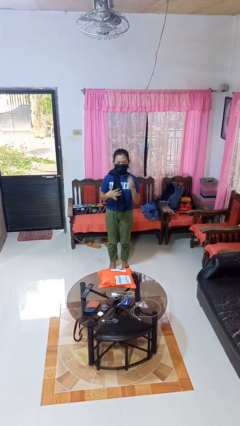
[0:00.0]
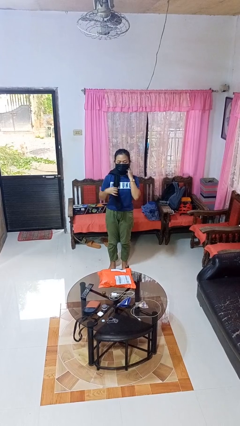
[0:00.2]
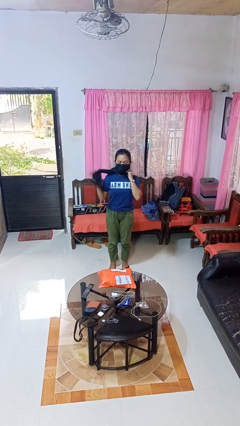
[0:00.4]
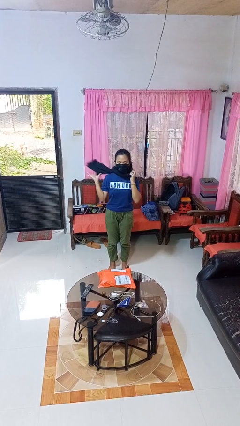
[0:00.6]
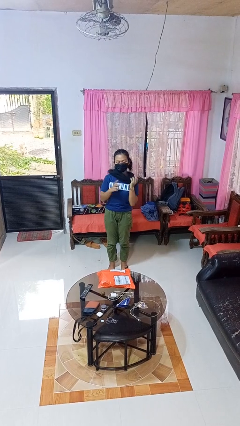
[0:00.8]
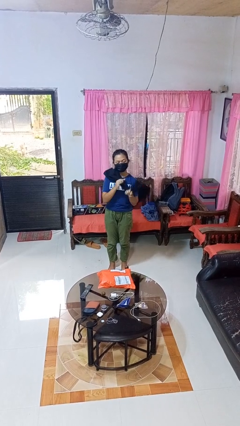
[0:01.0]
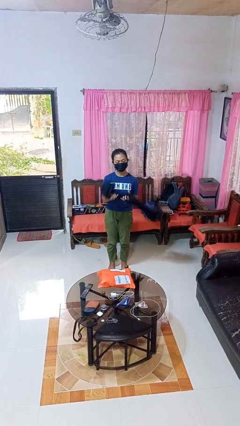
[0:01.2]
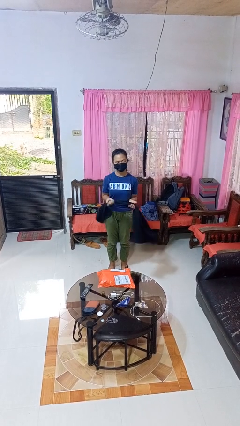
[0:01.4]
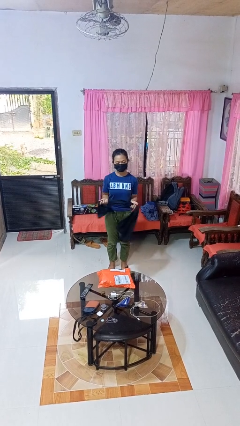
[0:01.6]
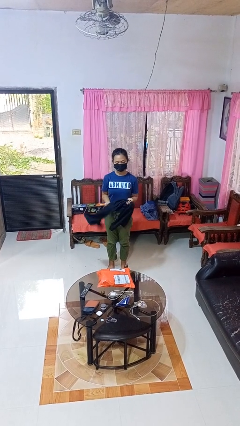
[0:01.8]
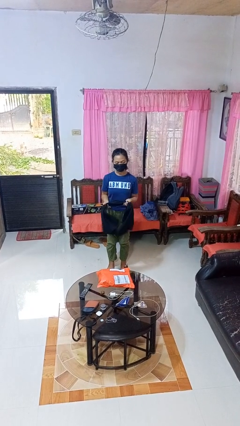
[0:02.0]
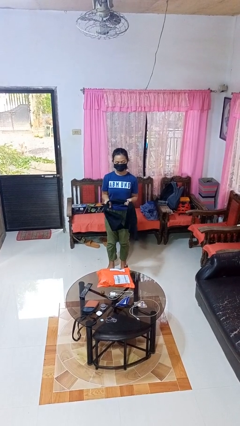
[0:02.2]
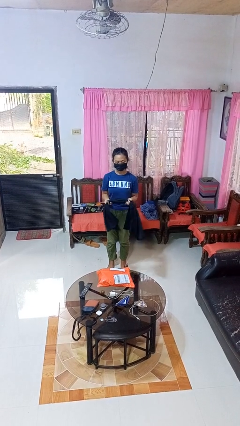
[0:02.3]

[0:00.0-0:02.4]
person takes off scarf

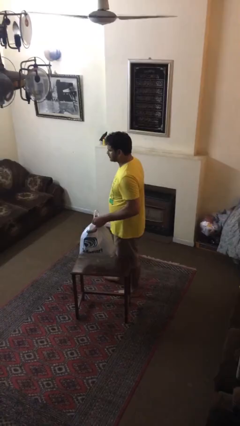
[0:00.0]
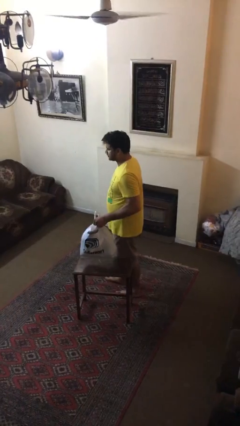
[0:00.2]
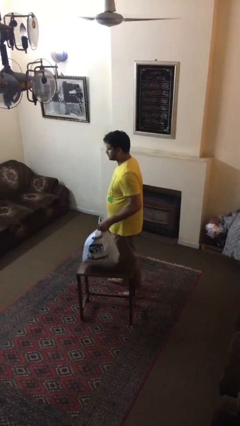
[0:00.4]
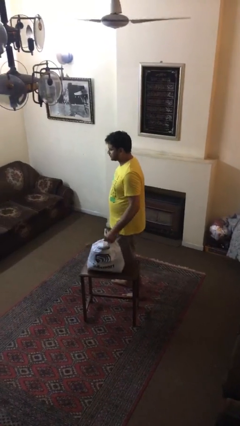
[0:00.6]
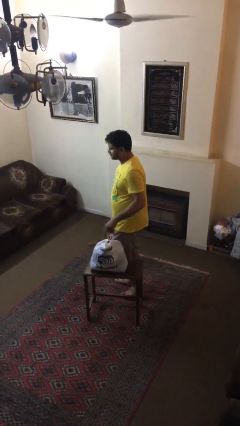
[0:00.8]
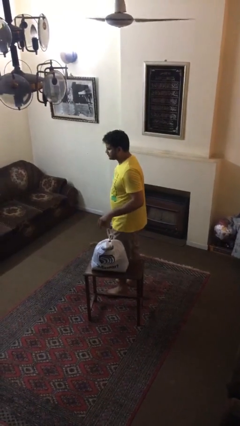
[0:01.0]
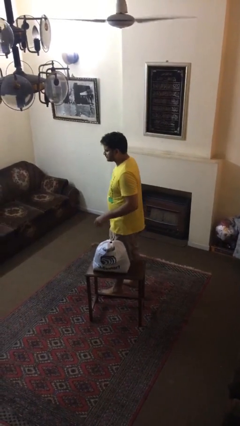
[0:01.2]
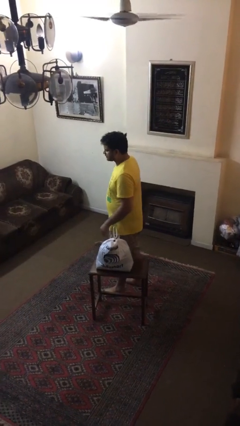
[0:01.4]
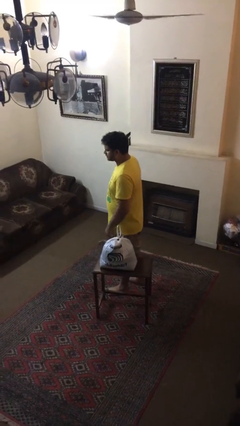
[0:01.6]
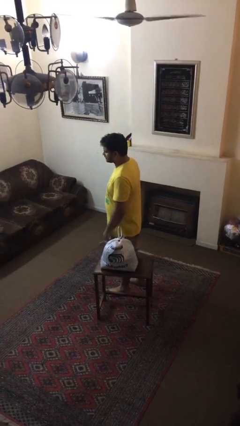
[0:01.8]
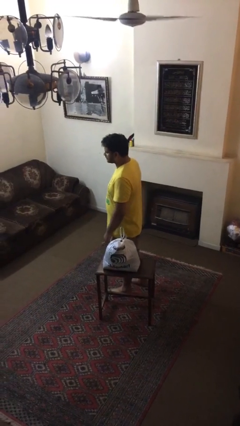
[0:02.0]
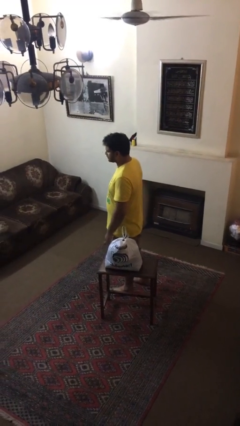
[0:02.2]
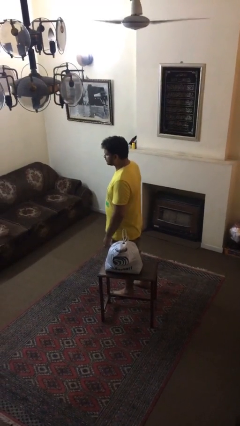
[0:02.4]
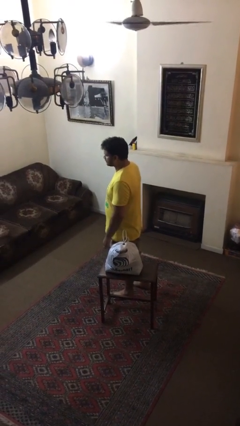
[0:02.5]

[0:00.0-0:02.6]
person puts down object on table

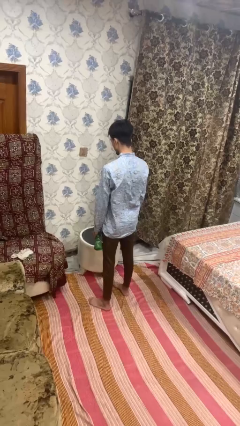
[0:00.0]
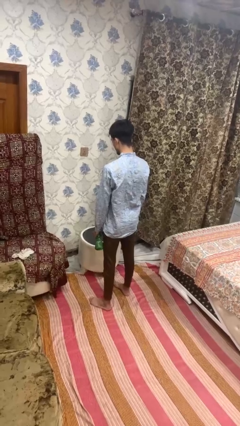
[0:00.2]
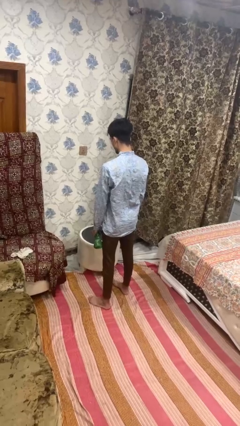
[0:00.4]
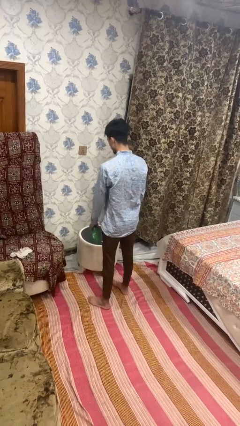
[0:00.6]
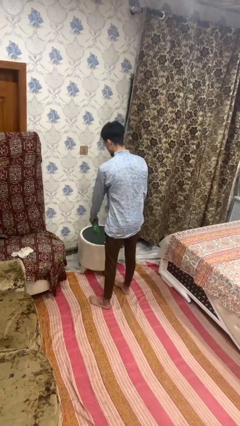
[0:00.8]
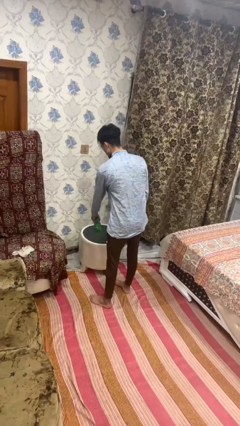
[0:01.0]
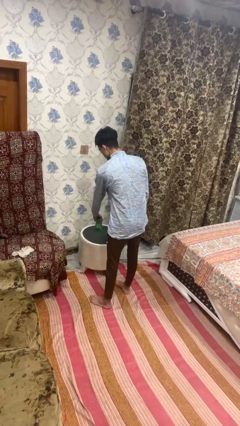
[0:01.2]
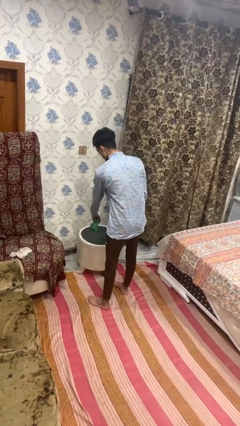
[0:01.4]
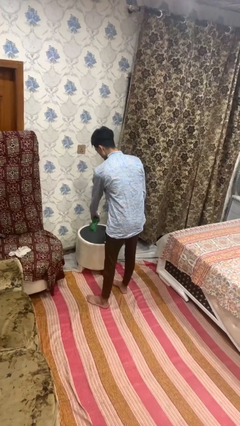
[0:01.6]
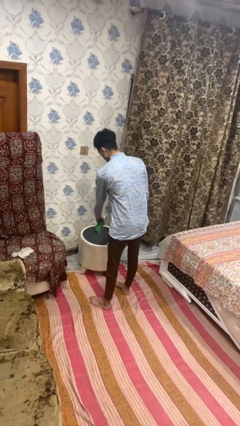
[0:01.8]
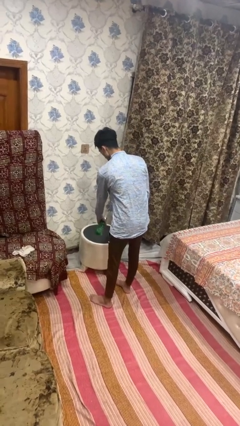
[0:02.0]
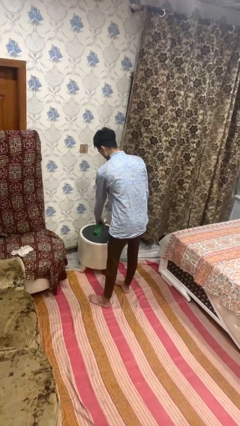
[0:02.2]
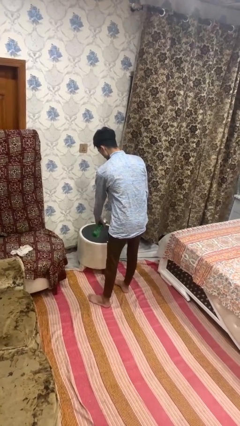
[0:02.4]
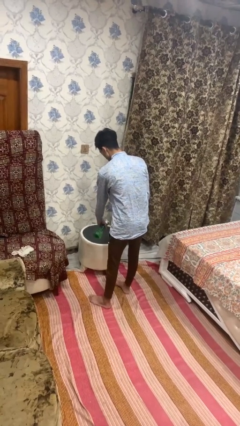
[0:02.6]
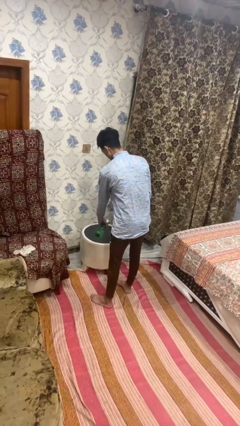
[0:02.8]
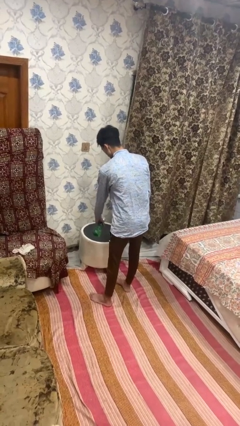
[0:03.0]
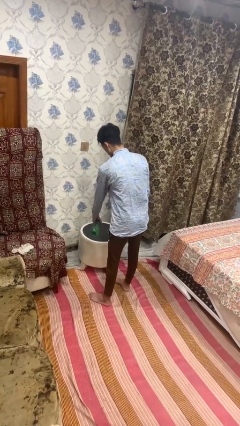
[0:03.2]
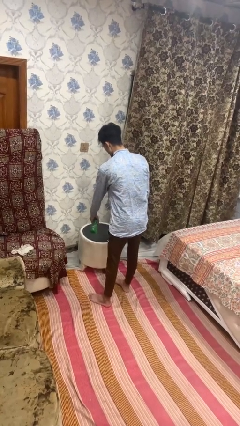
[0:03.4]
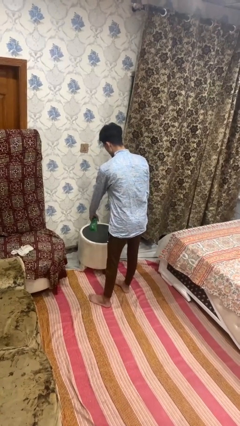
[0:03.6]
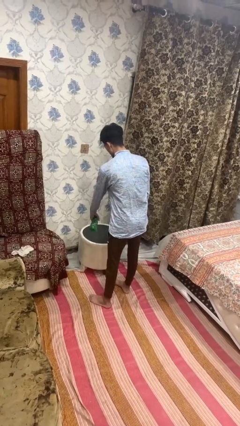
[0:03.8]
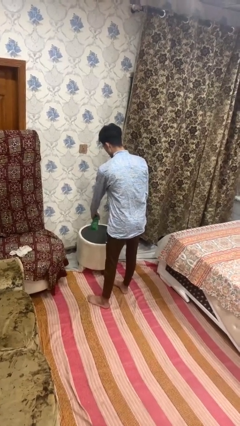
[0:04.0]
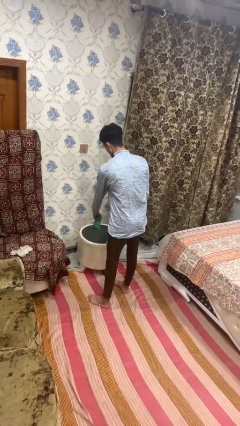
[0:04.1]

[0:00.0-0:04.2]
person sprays from bottle

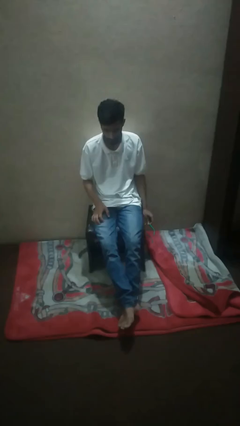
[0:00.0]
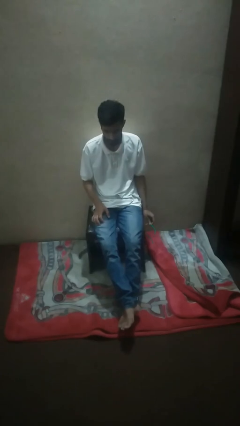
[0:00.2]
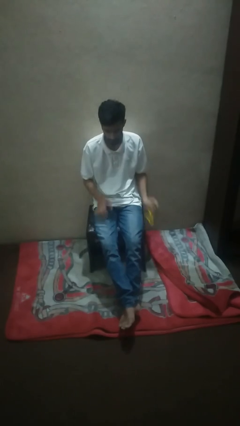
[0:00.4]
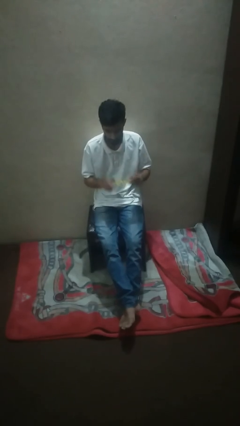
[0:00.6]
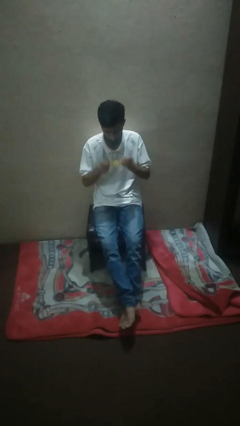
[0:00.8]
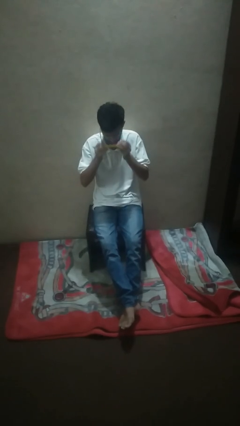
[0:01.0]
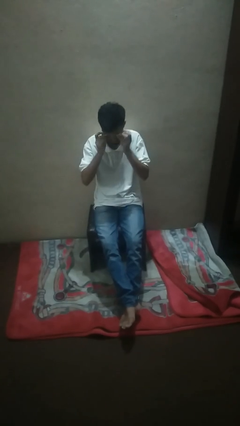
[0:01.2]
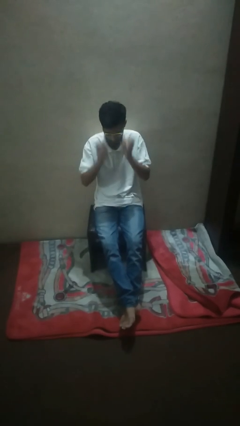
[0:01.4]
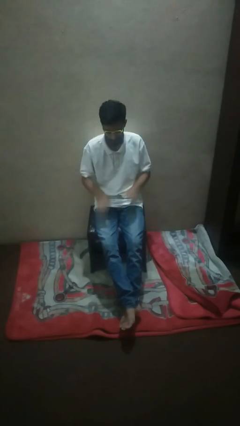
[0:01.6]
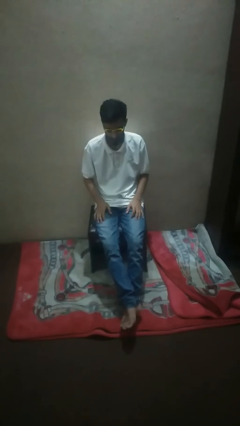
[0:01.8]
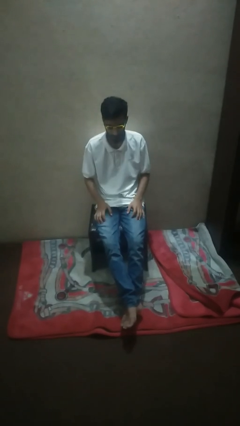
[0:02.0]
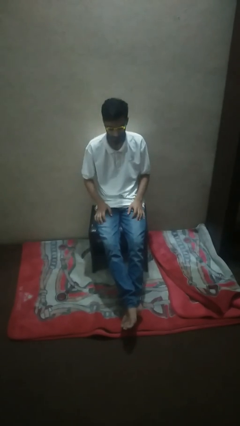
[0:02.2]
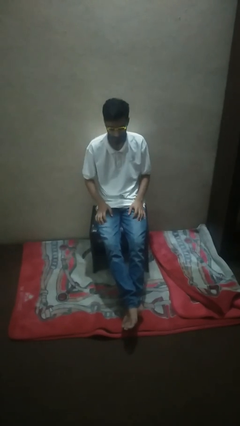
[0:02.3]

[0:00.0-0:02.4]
person puts on sunglasses

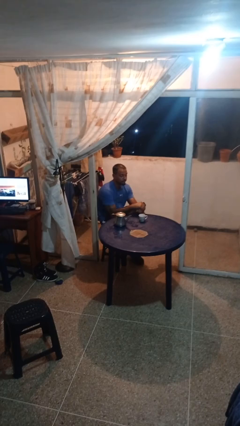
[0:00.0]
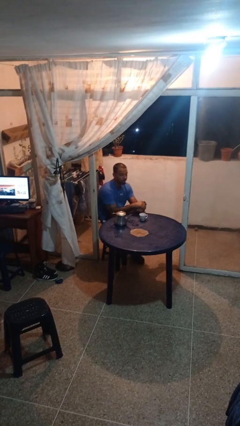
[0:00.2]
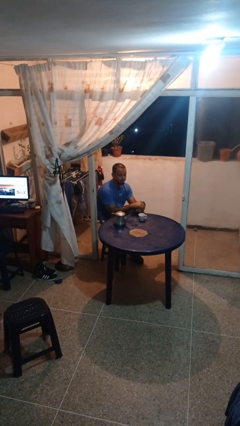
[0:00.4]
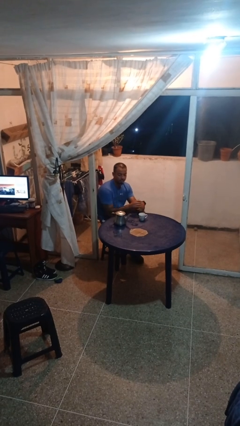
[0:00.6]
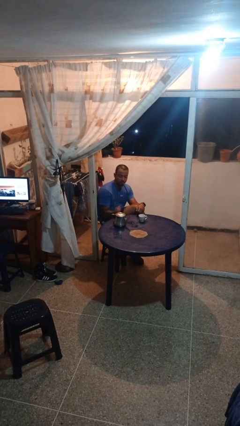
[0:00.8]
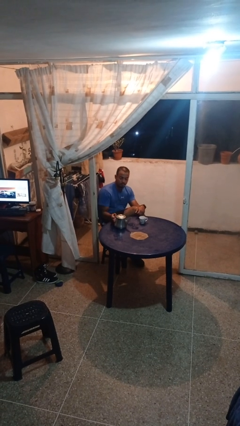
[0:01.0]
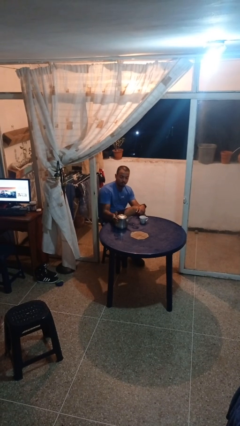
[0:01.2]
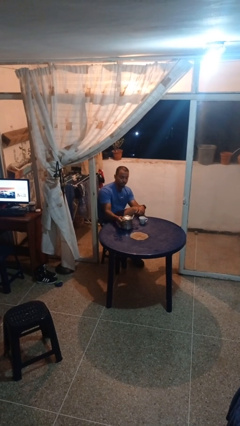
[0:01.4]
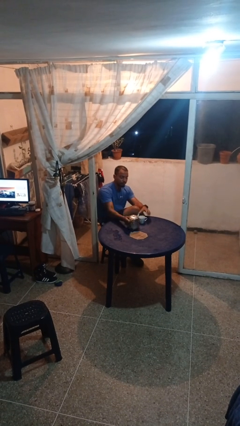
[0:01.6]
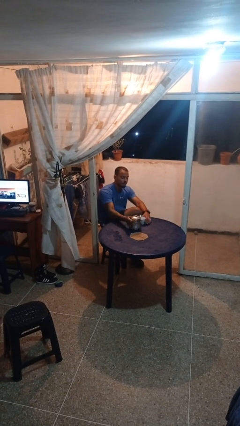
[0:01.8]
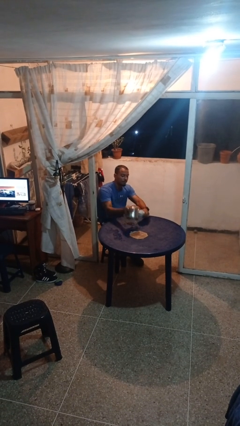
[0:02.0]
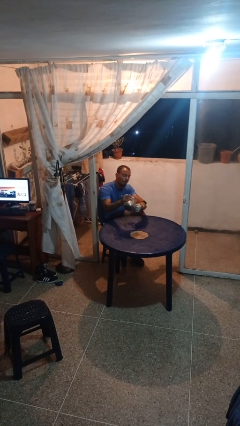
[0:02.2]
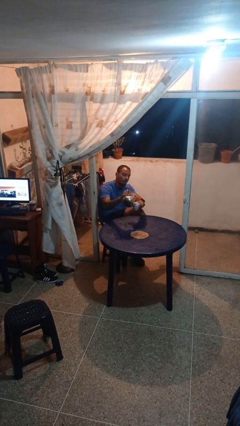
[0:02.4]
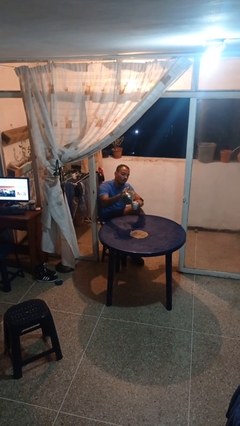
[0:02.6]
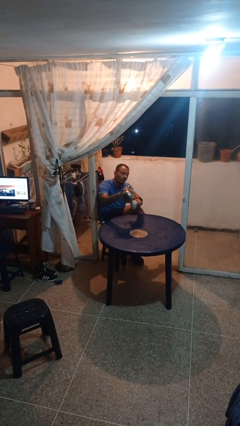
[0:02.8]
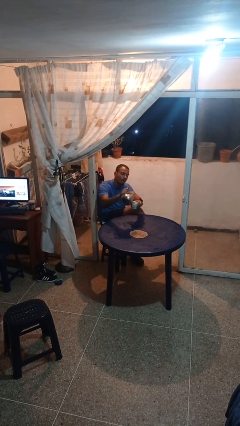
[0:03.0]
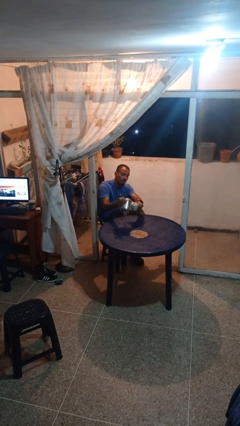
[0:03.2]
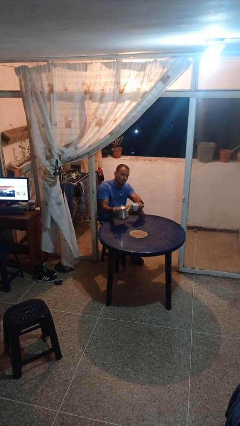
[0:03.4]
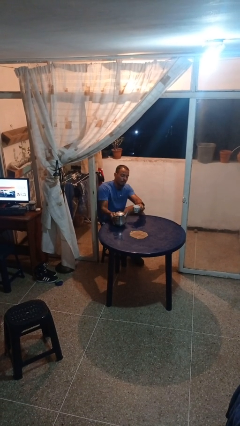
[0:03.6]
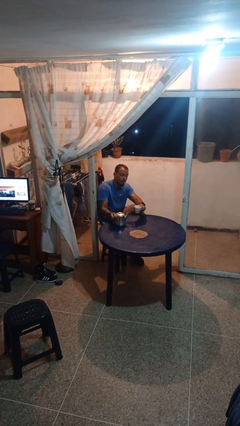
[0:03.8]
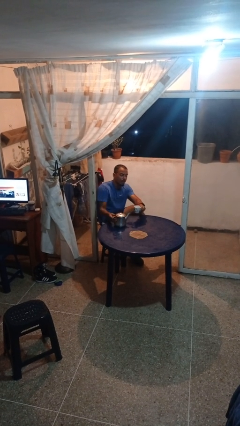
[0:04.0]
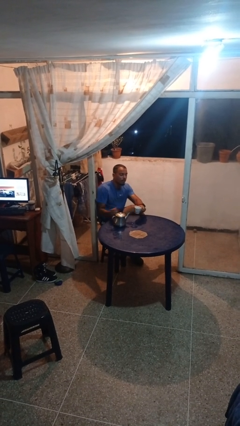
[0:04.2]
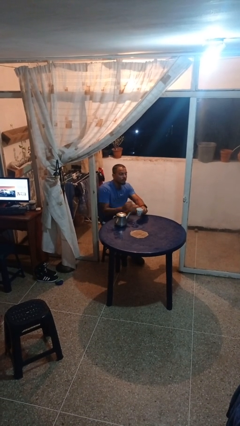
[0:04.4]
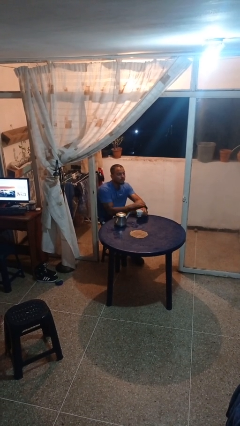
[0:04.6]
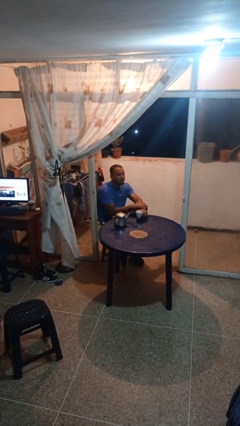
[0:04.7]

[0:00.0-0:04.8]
person pours coffee into mug

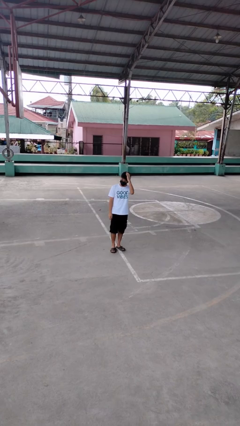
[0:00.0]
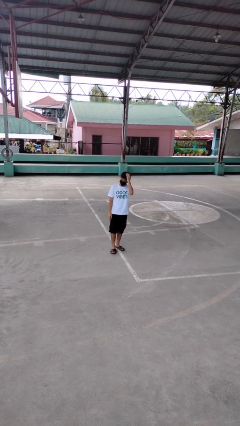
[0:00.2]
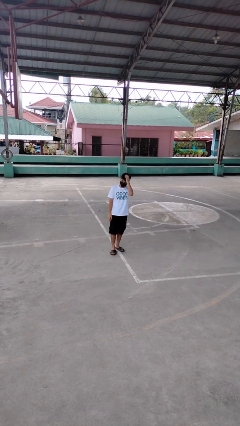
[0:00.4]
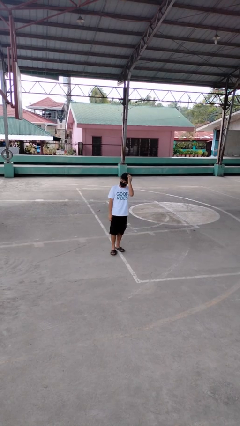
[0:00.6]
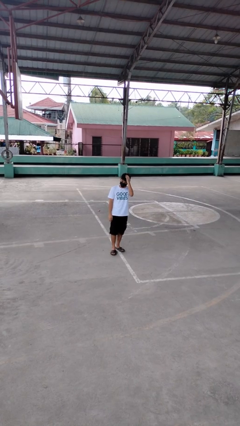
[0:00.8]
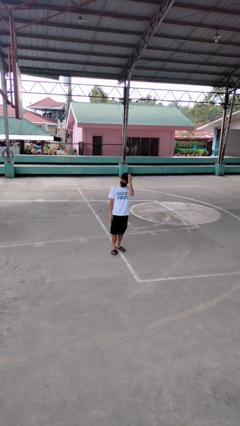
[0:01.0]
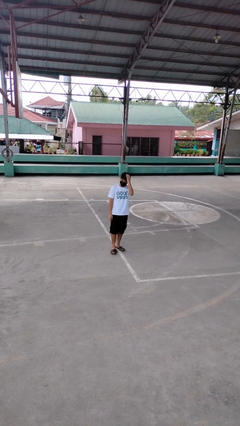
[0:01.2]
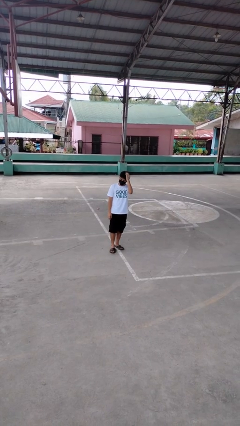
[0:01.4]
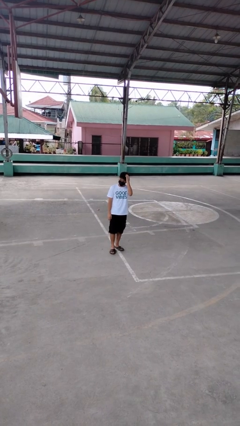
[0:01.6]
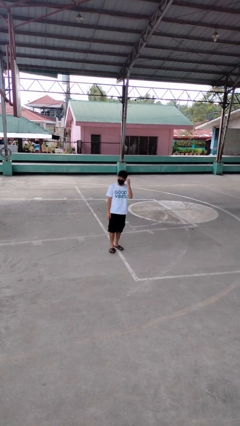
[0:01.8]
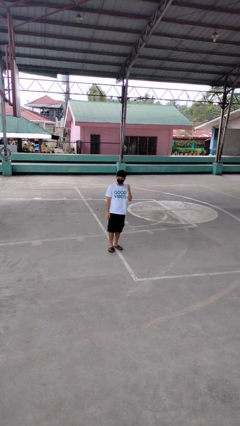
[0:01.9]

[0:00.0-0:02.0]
person pats head
